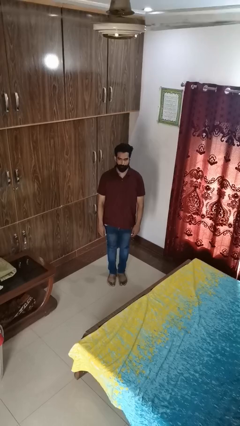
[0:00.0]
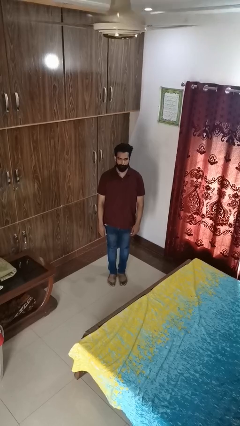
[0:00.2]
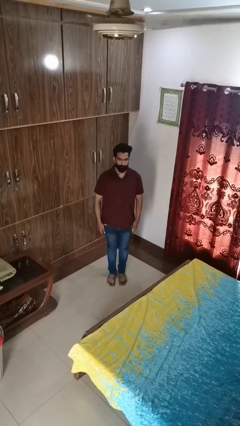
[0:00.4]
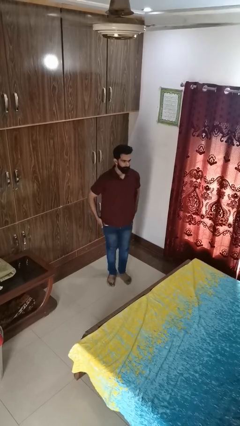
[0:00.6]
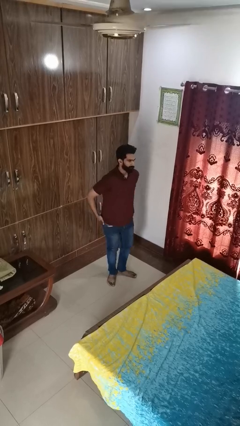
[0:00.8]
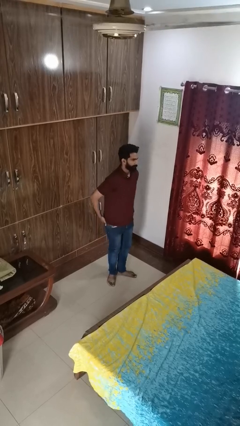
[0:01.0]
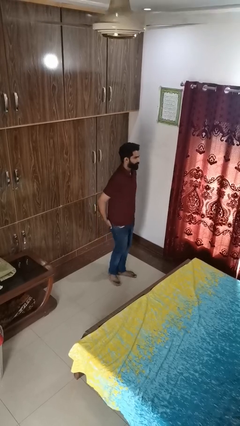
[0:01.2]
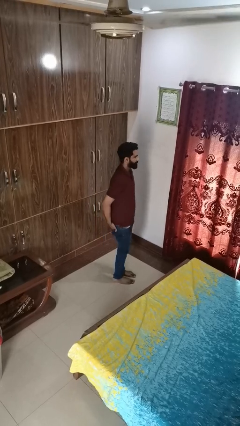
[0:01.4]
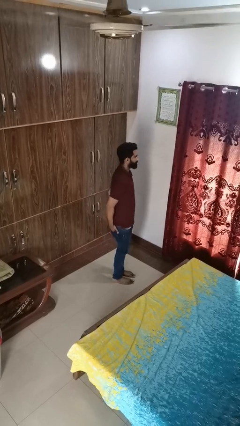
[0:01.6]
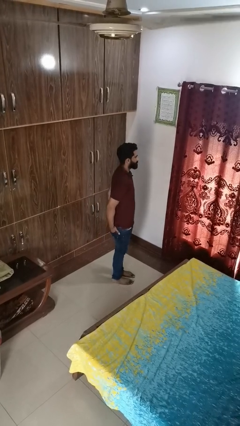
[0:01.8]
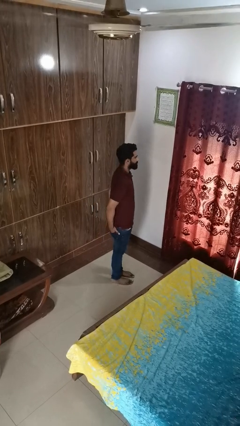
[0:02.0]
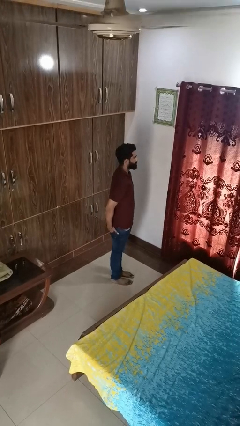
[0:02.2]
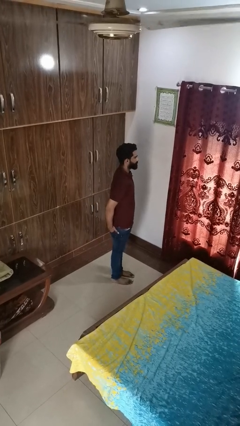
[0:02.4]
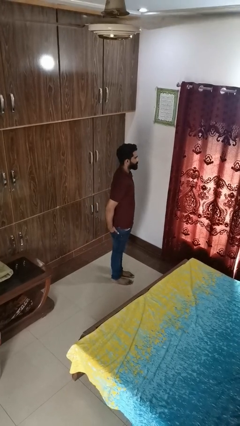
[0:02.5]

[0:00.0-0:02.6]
person puts hands in back pockets

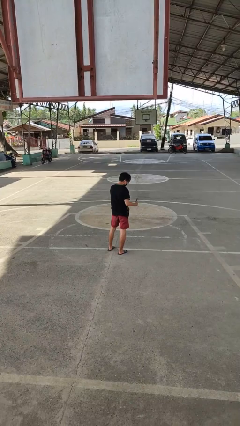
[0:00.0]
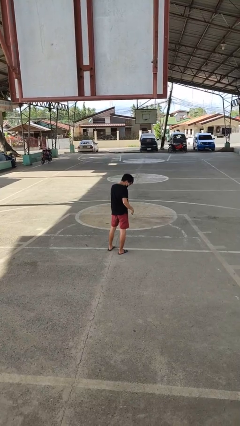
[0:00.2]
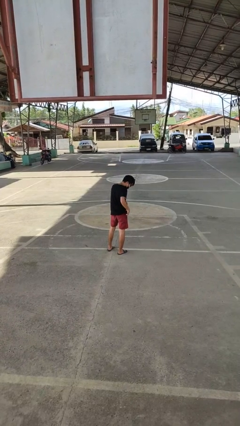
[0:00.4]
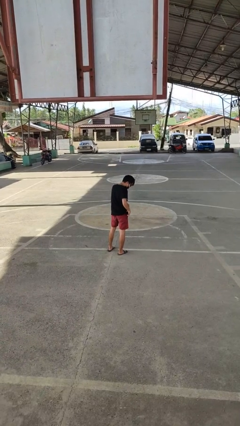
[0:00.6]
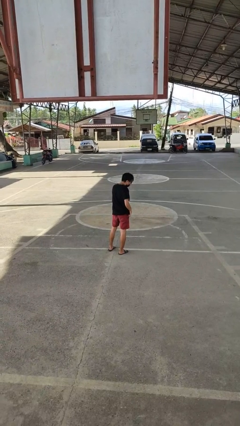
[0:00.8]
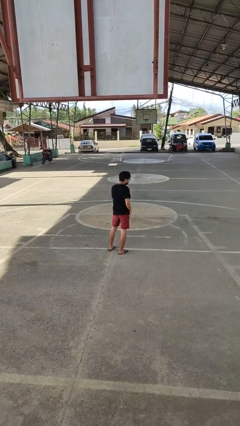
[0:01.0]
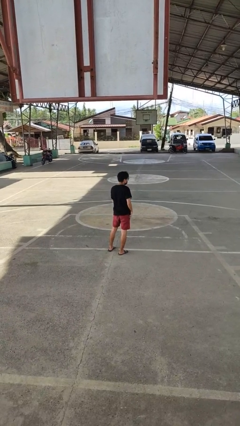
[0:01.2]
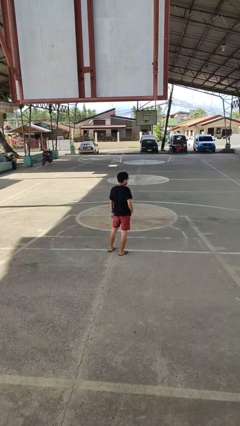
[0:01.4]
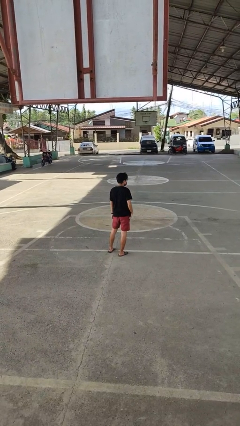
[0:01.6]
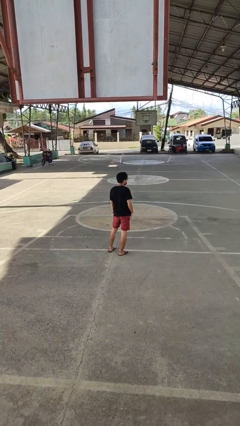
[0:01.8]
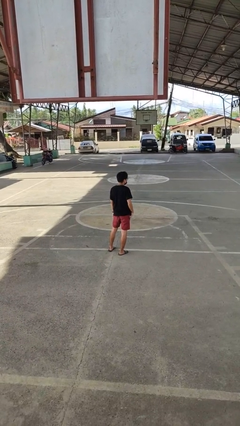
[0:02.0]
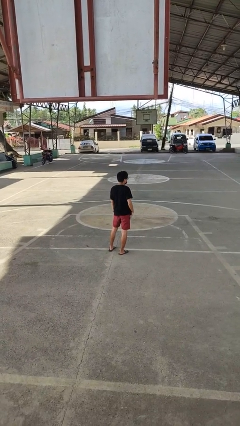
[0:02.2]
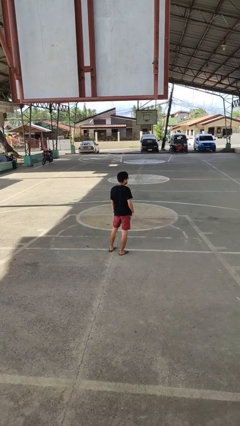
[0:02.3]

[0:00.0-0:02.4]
person puts phone into pocket

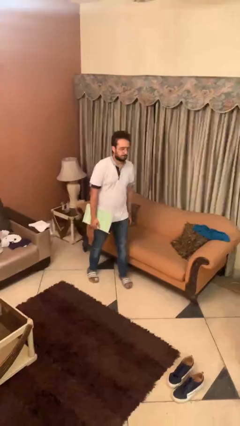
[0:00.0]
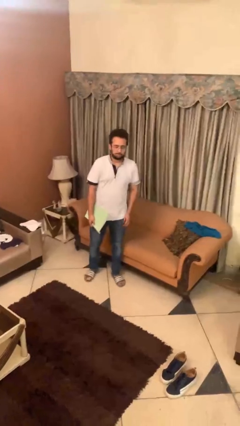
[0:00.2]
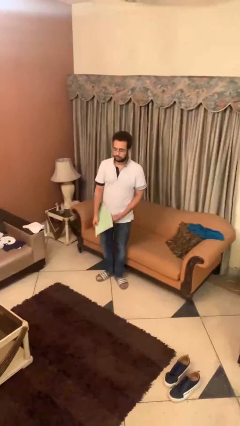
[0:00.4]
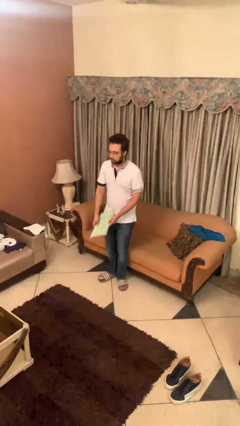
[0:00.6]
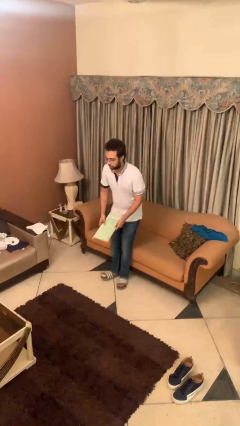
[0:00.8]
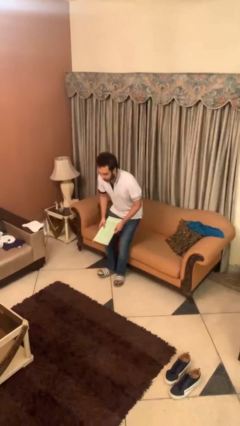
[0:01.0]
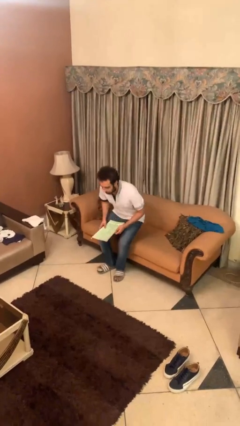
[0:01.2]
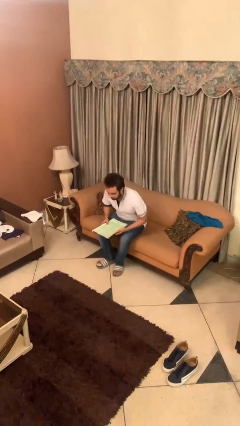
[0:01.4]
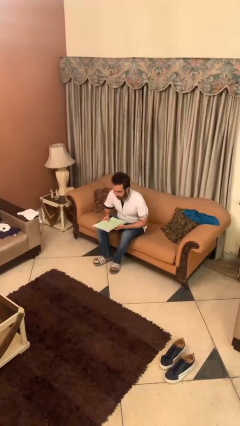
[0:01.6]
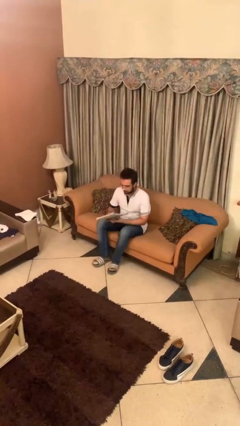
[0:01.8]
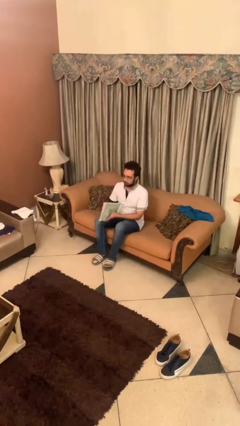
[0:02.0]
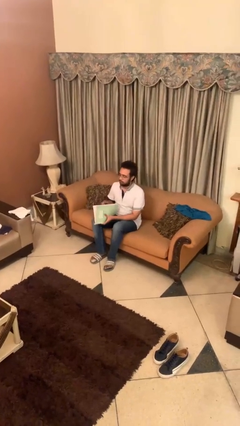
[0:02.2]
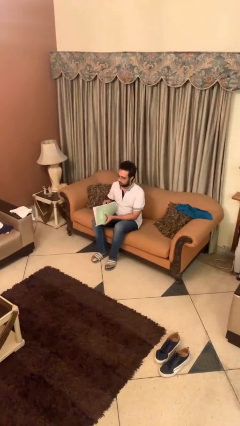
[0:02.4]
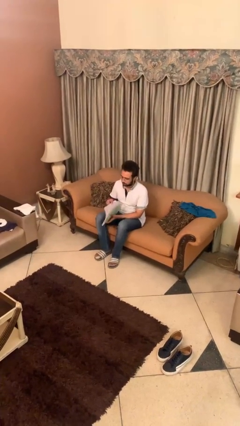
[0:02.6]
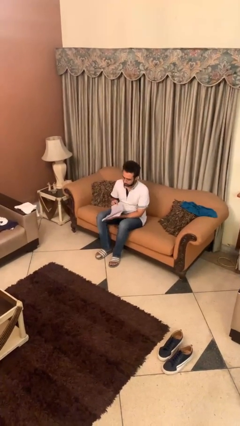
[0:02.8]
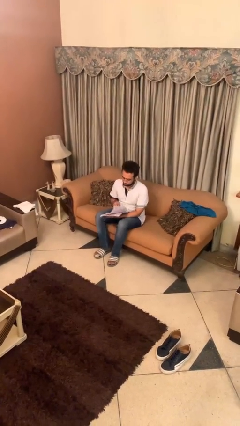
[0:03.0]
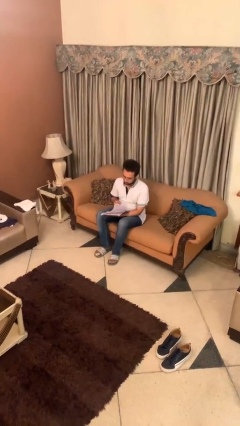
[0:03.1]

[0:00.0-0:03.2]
person sits down

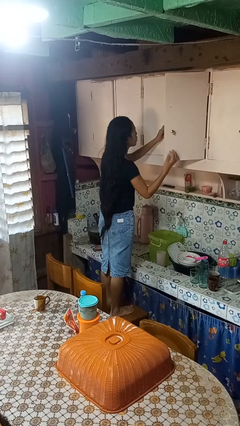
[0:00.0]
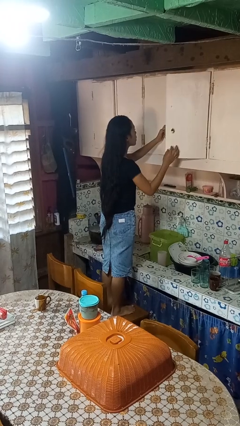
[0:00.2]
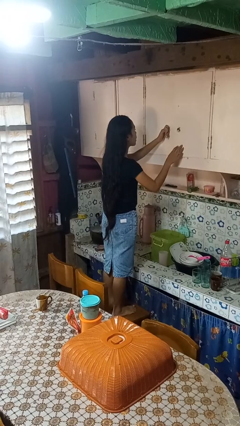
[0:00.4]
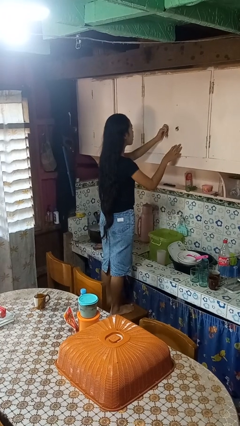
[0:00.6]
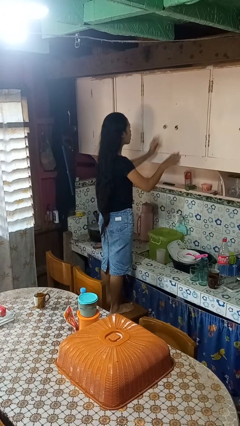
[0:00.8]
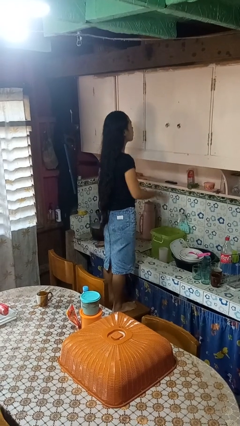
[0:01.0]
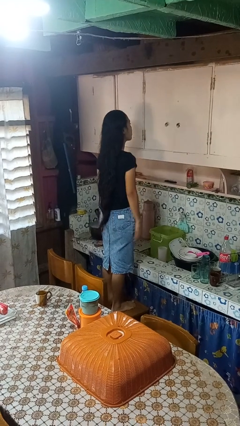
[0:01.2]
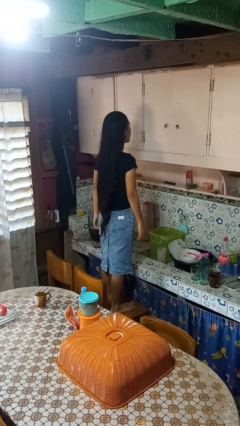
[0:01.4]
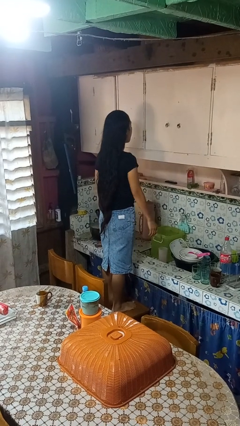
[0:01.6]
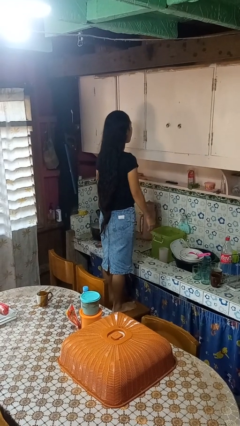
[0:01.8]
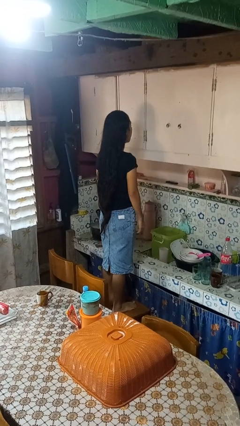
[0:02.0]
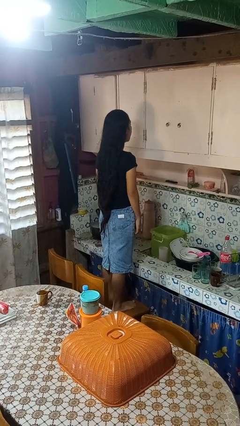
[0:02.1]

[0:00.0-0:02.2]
person closes cabinet

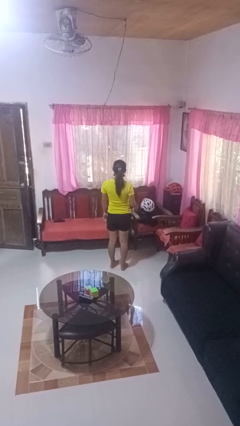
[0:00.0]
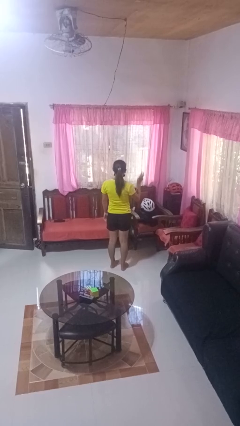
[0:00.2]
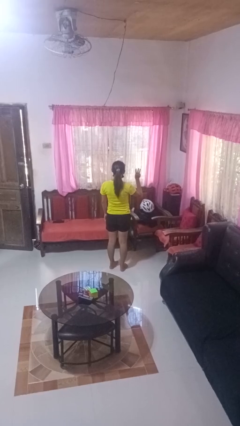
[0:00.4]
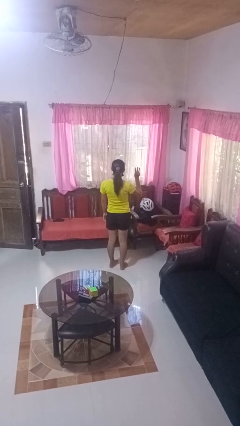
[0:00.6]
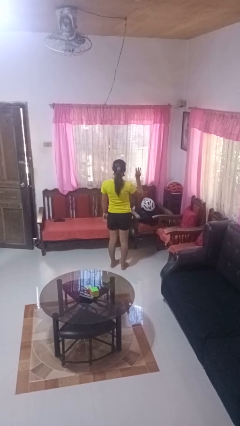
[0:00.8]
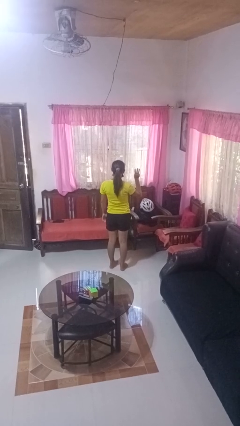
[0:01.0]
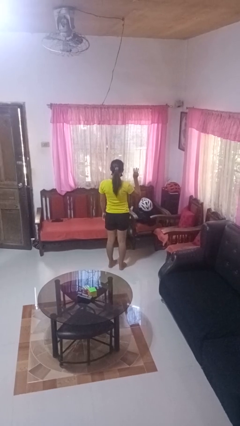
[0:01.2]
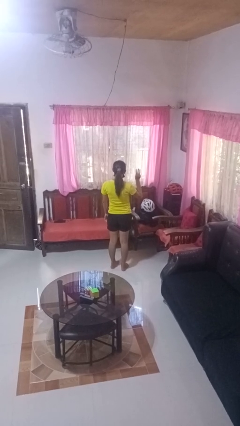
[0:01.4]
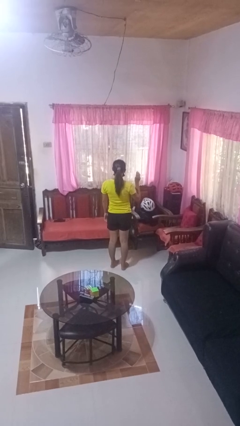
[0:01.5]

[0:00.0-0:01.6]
person gestures number three

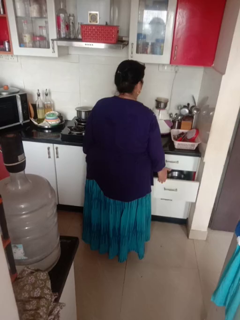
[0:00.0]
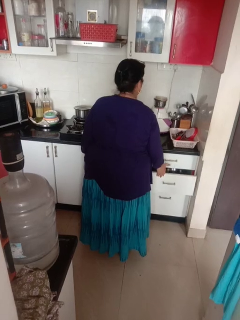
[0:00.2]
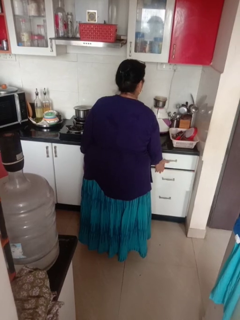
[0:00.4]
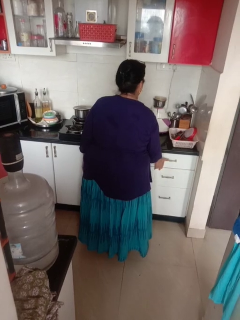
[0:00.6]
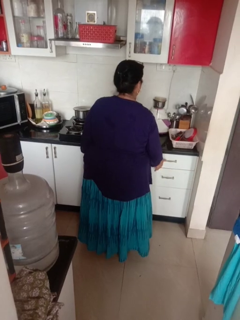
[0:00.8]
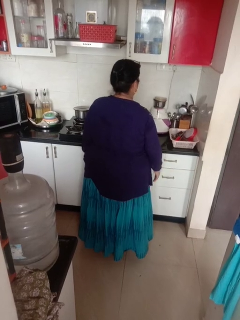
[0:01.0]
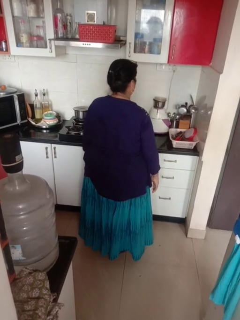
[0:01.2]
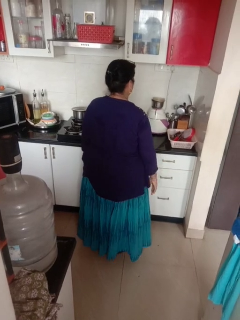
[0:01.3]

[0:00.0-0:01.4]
person closes kitchen drawer

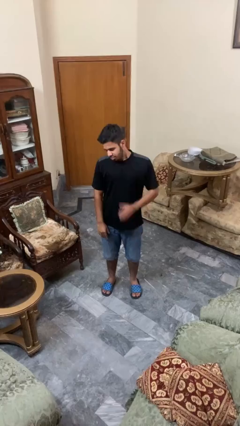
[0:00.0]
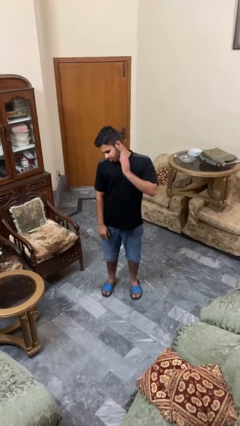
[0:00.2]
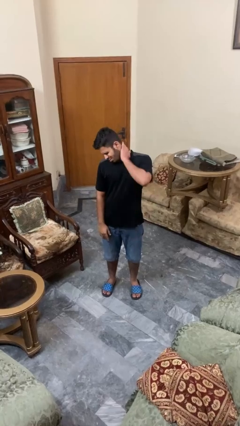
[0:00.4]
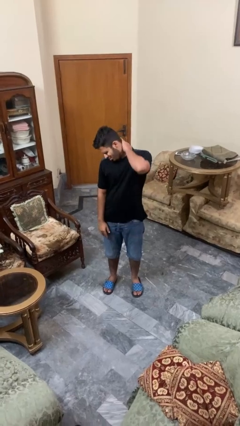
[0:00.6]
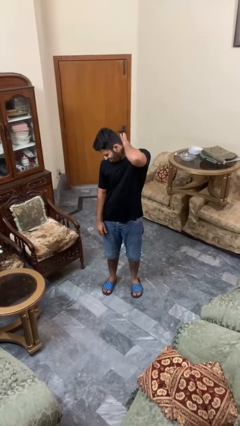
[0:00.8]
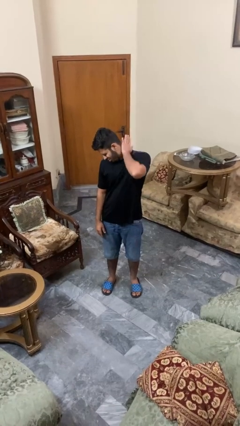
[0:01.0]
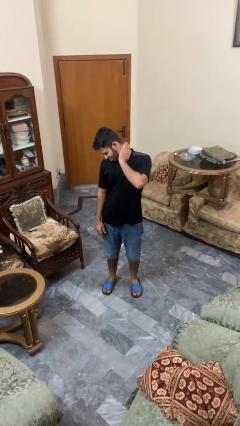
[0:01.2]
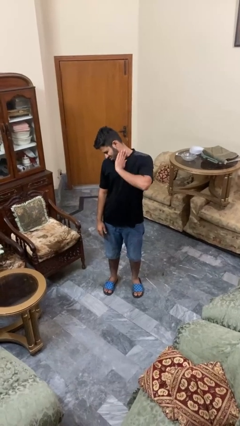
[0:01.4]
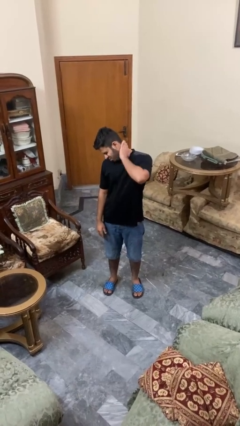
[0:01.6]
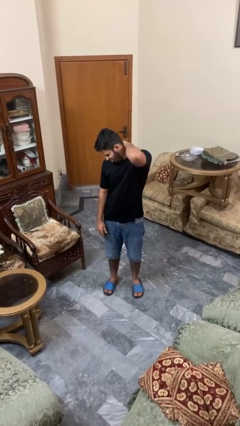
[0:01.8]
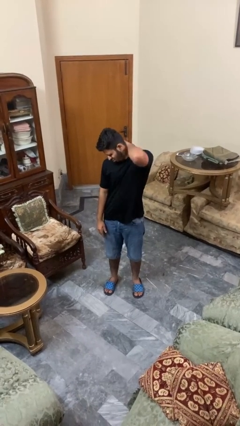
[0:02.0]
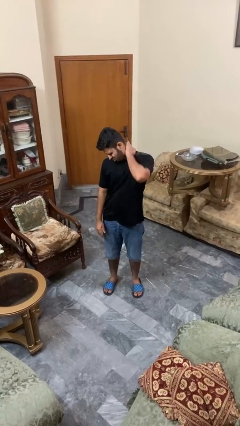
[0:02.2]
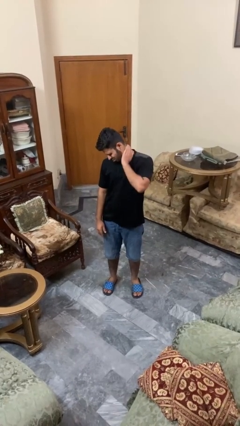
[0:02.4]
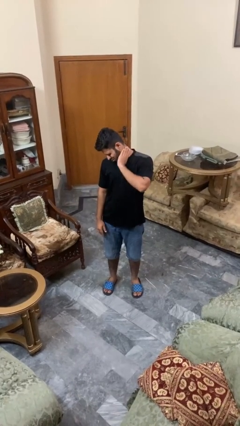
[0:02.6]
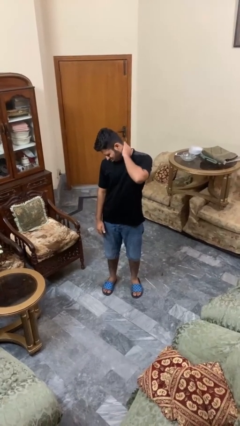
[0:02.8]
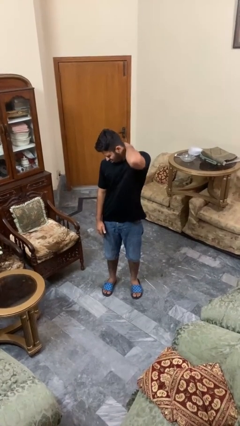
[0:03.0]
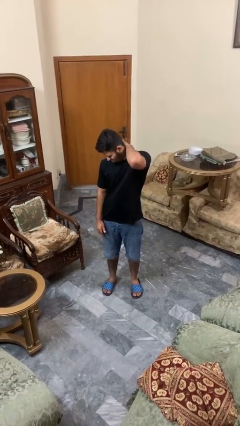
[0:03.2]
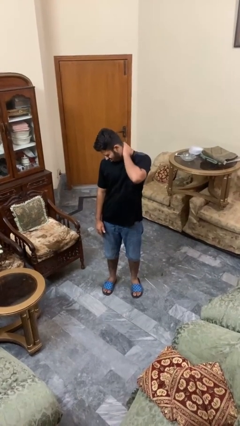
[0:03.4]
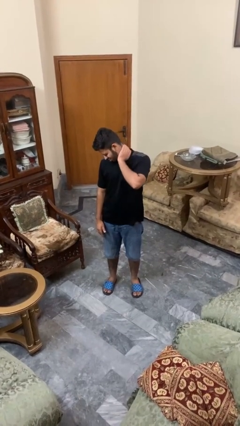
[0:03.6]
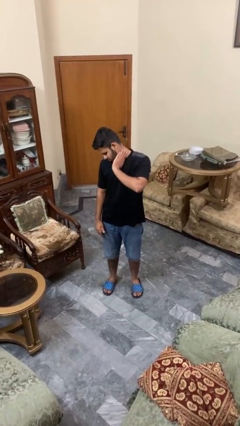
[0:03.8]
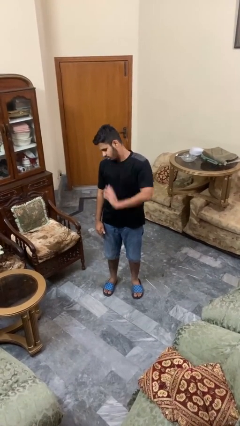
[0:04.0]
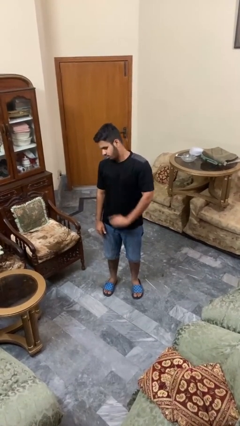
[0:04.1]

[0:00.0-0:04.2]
person rubs neck

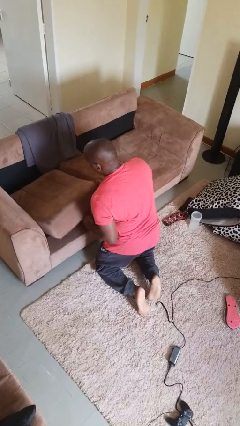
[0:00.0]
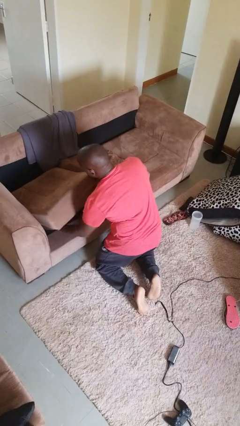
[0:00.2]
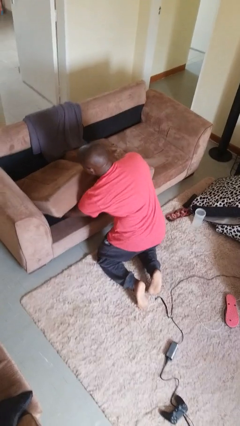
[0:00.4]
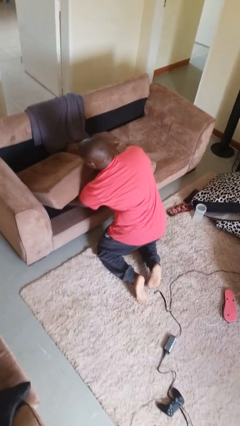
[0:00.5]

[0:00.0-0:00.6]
person searches under couch
